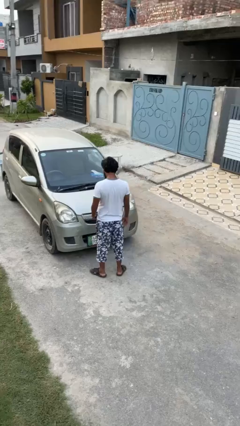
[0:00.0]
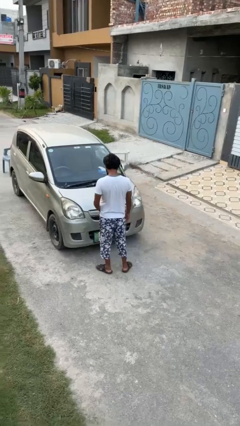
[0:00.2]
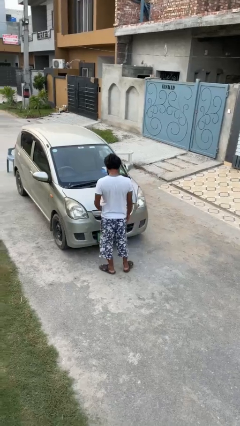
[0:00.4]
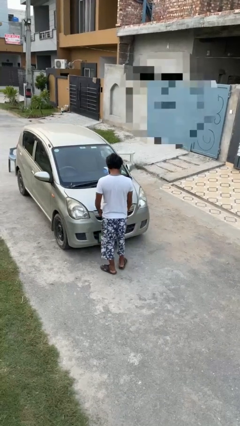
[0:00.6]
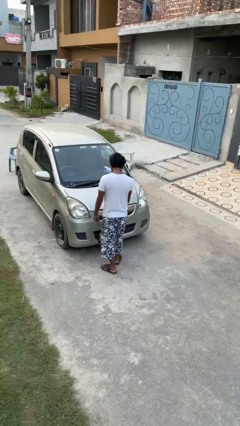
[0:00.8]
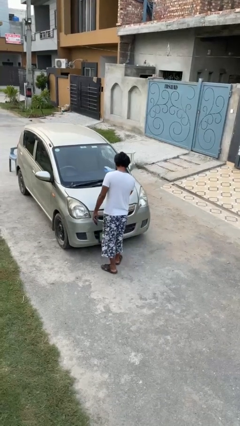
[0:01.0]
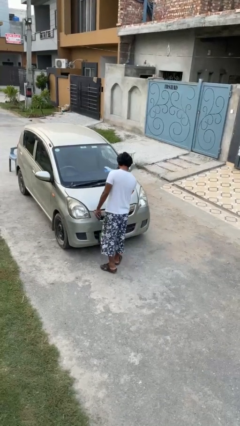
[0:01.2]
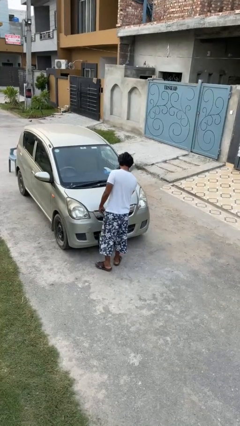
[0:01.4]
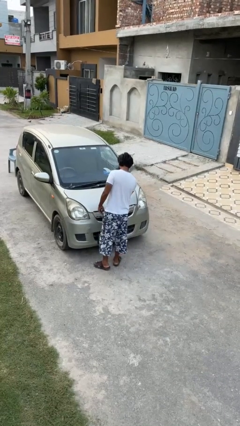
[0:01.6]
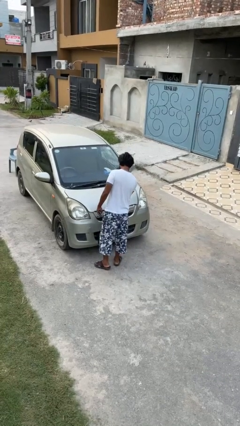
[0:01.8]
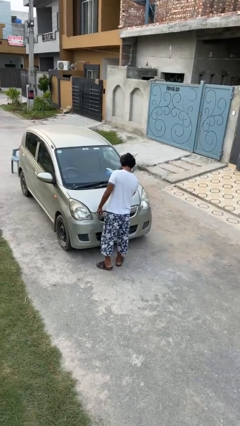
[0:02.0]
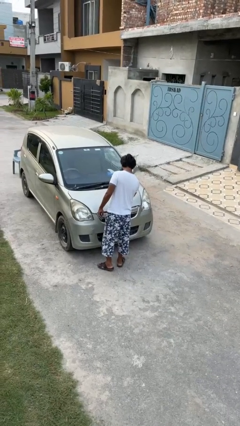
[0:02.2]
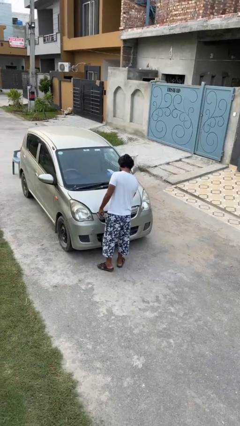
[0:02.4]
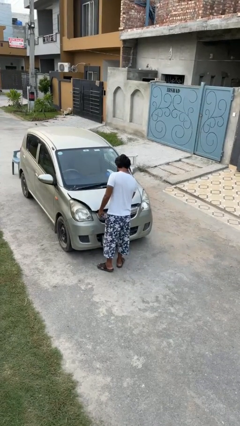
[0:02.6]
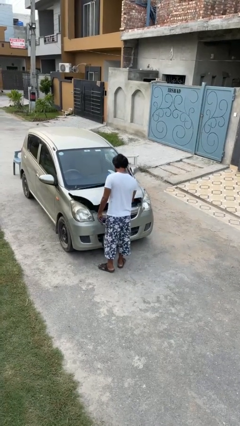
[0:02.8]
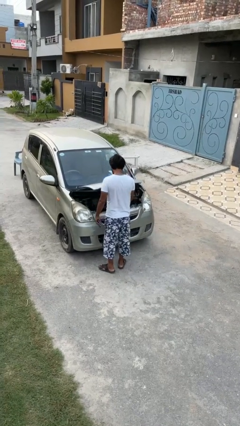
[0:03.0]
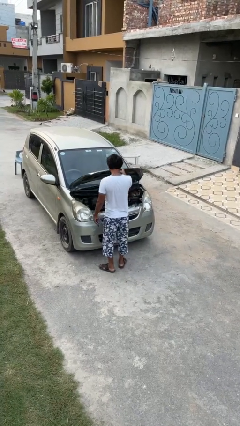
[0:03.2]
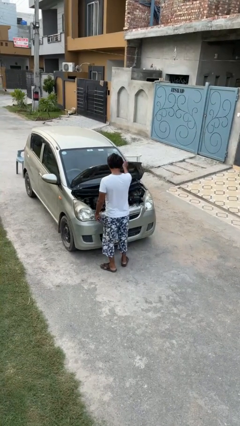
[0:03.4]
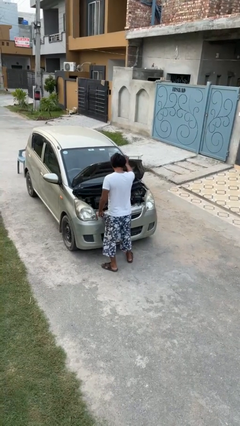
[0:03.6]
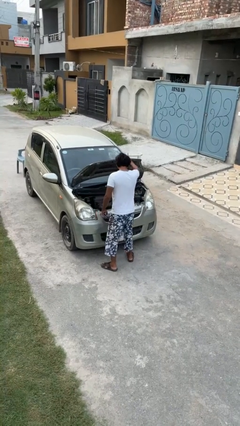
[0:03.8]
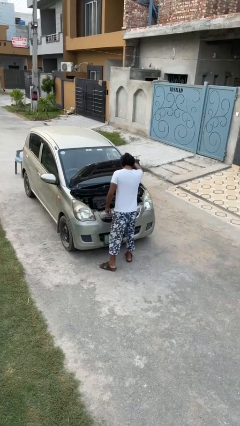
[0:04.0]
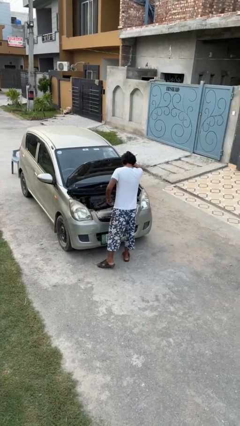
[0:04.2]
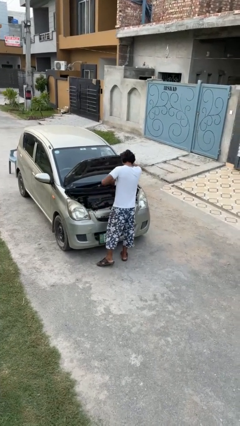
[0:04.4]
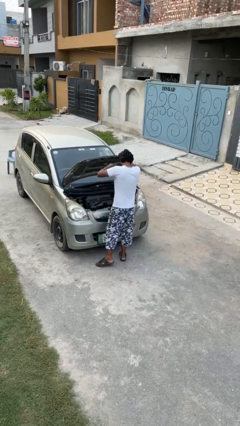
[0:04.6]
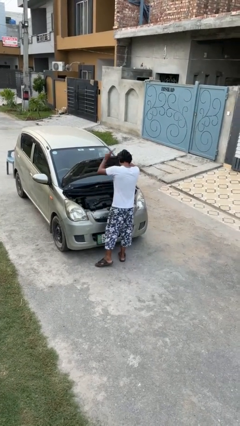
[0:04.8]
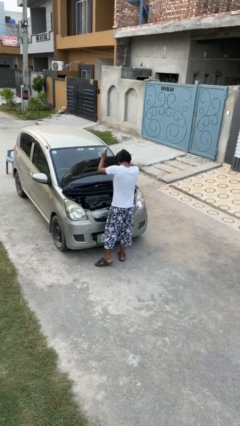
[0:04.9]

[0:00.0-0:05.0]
person opens car hood

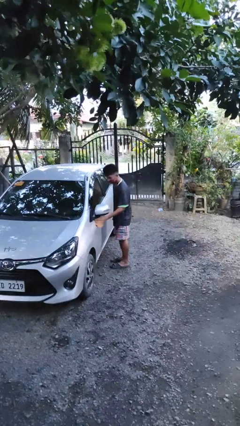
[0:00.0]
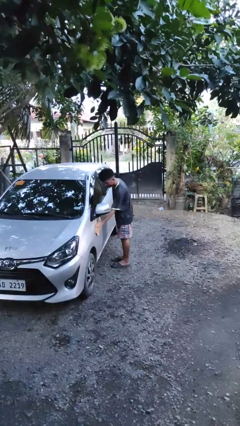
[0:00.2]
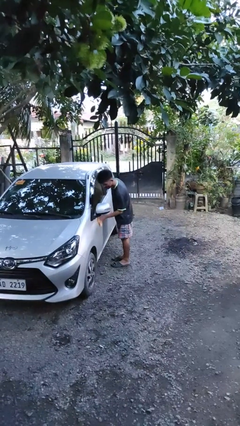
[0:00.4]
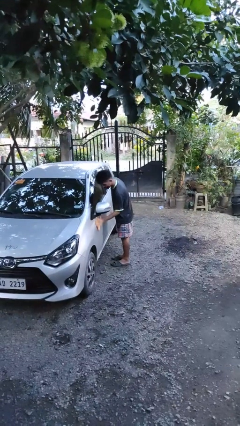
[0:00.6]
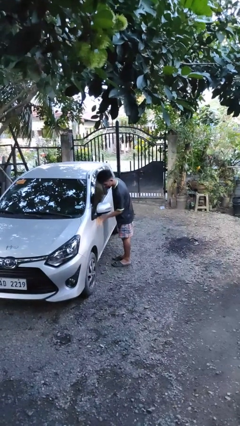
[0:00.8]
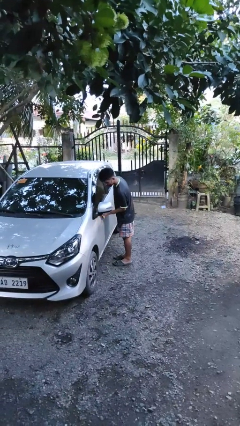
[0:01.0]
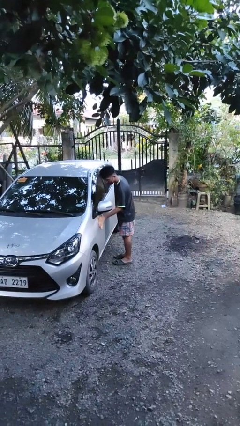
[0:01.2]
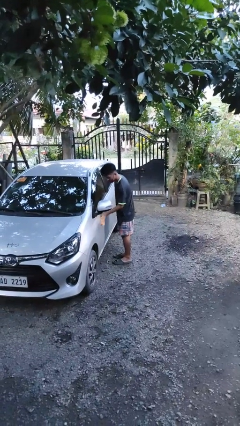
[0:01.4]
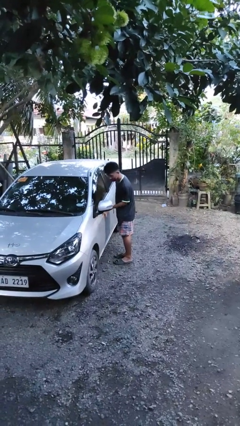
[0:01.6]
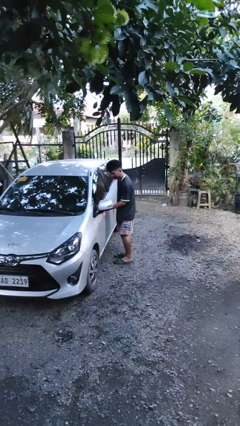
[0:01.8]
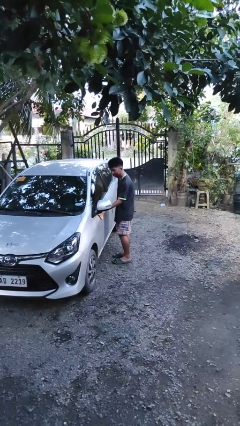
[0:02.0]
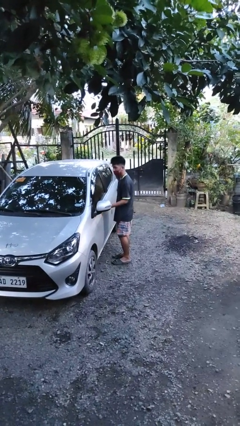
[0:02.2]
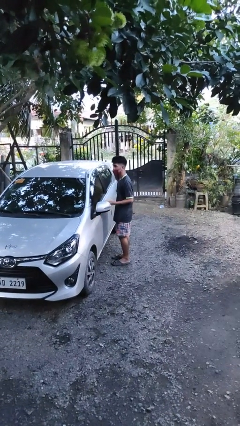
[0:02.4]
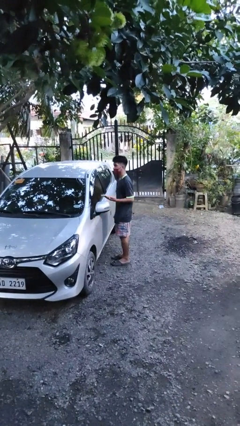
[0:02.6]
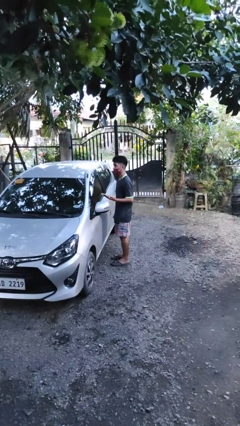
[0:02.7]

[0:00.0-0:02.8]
person polishes car with rag

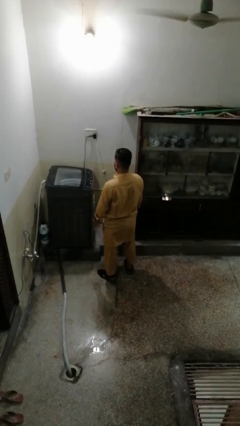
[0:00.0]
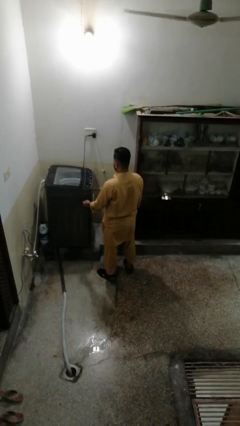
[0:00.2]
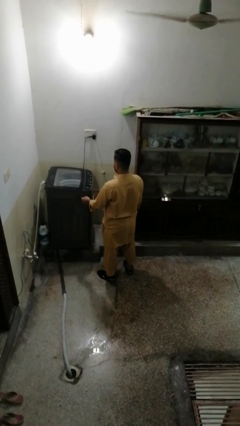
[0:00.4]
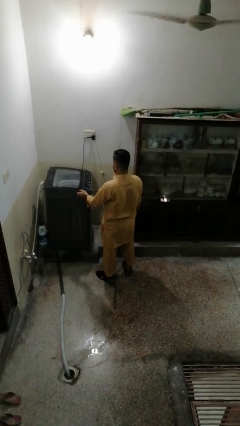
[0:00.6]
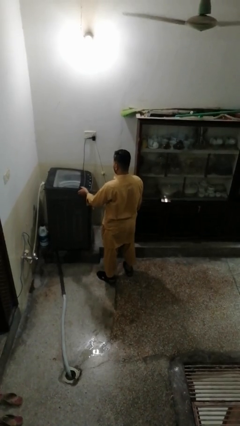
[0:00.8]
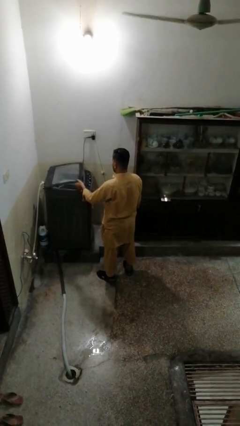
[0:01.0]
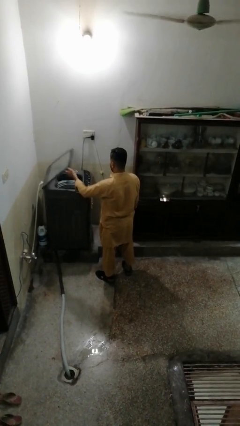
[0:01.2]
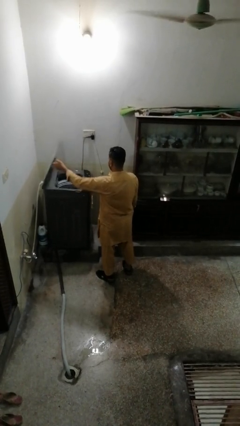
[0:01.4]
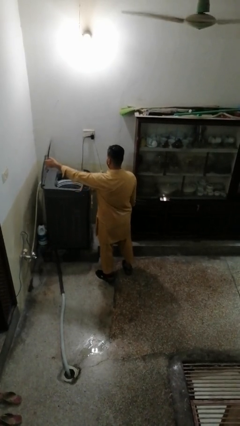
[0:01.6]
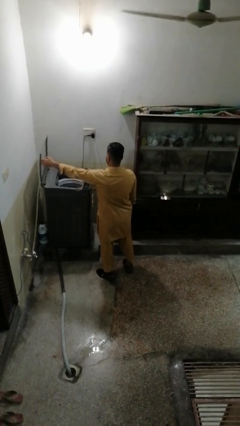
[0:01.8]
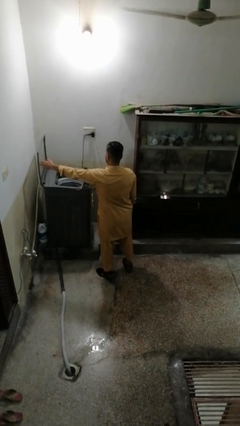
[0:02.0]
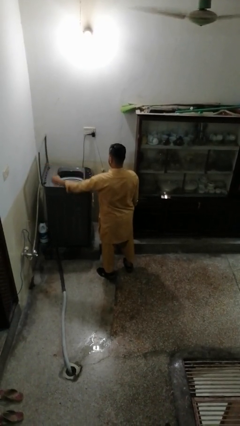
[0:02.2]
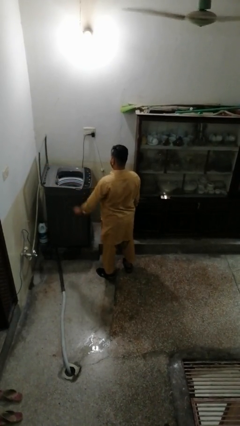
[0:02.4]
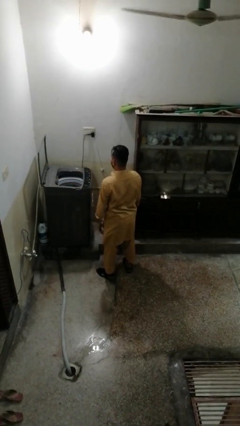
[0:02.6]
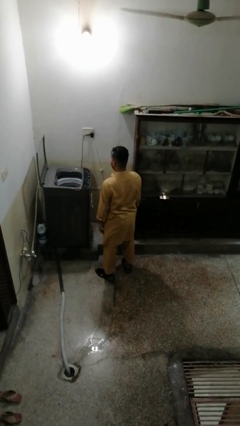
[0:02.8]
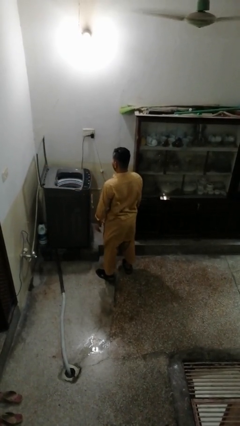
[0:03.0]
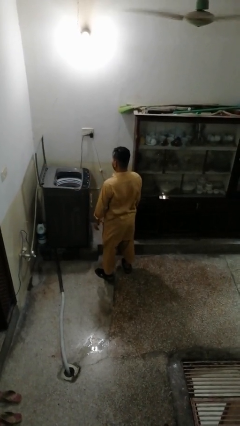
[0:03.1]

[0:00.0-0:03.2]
person opens clothes washer

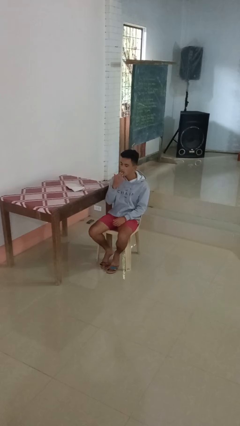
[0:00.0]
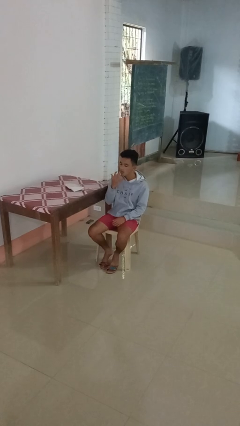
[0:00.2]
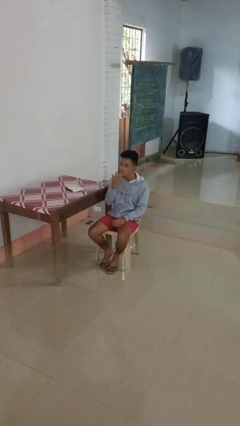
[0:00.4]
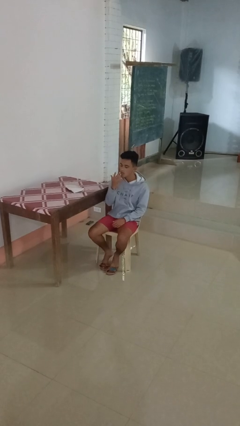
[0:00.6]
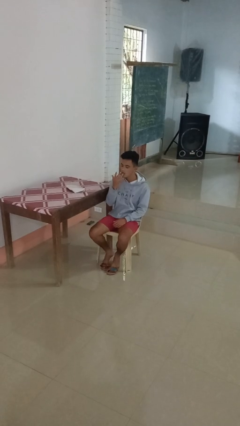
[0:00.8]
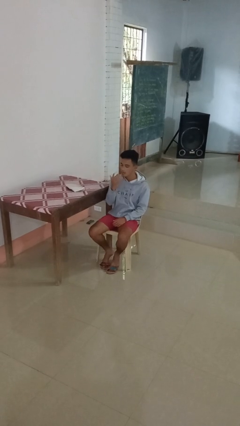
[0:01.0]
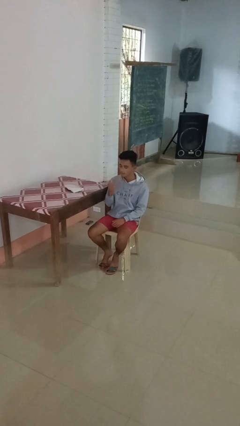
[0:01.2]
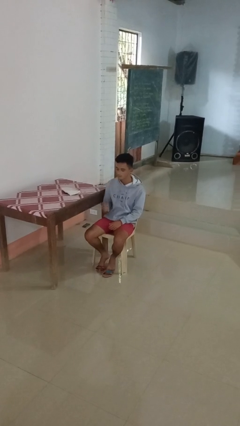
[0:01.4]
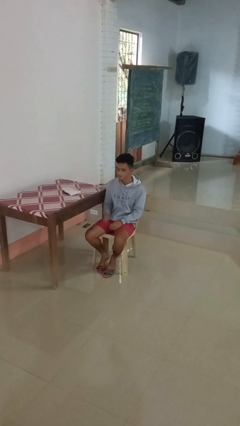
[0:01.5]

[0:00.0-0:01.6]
person licks fingers

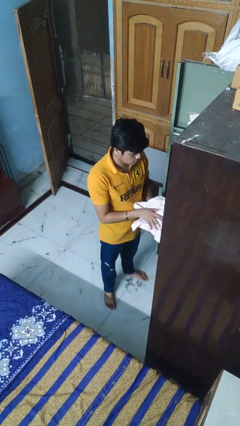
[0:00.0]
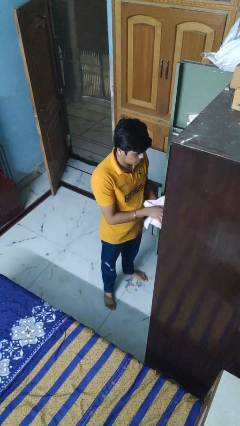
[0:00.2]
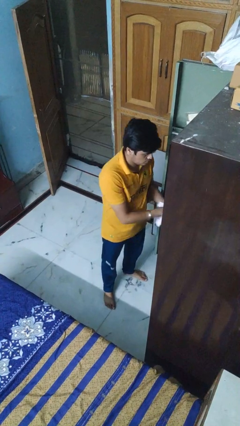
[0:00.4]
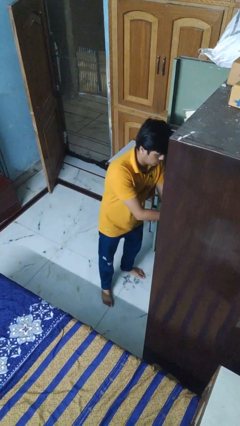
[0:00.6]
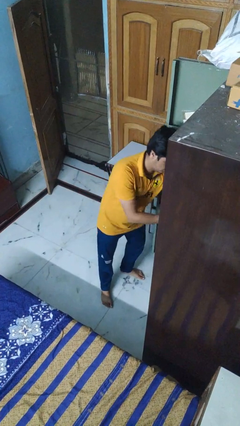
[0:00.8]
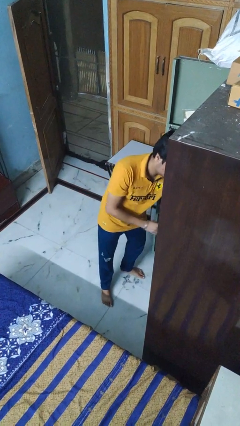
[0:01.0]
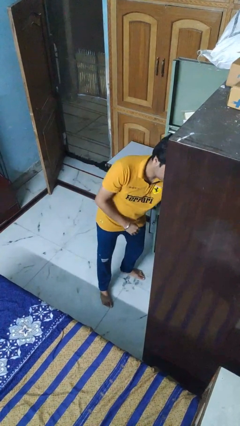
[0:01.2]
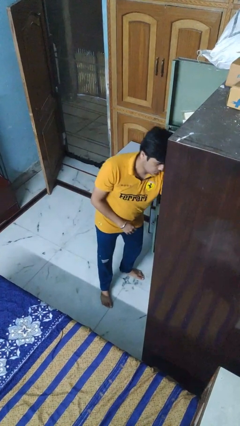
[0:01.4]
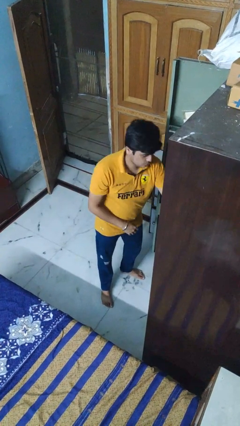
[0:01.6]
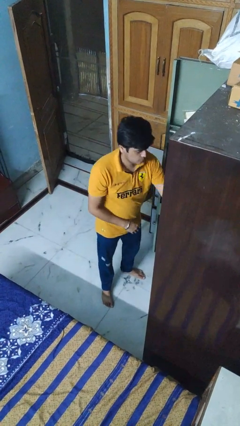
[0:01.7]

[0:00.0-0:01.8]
person puts clothes into dresser

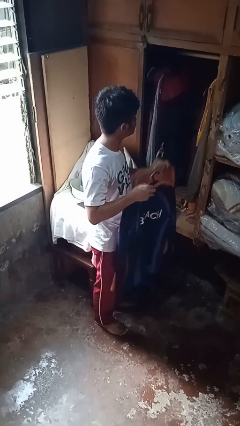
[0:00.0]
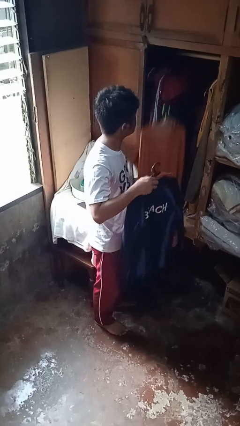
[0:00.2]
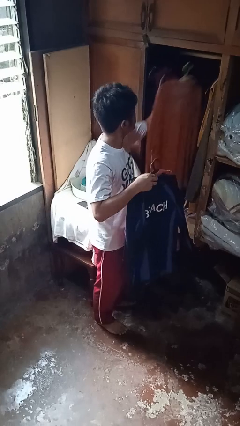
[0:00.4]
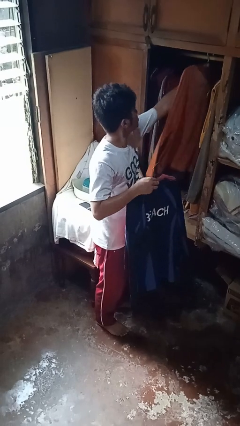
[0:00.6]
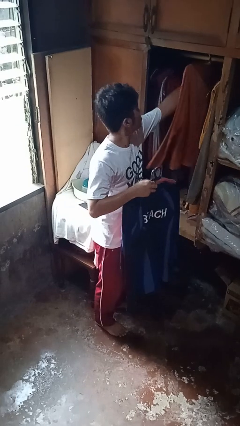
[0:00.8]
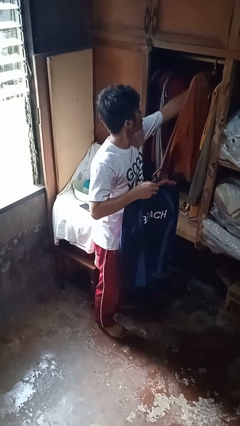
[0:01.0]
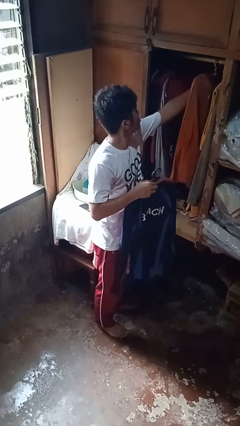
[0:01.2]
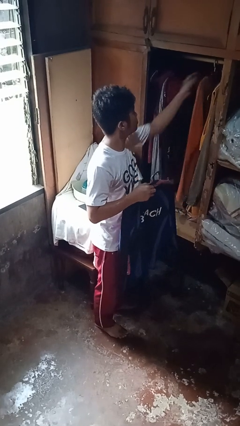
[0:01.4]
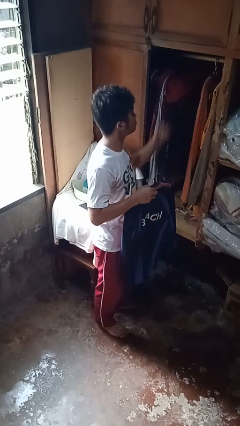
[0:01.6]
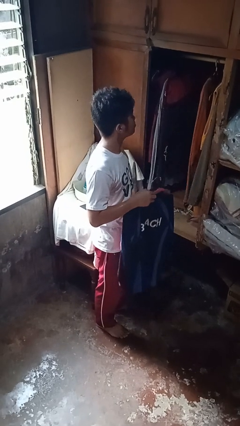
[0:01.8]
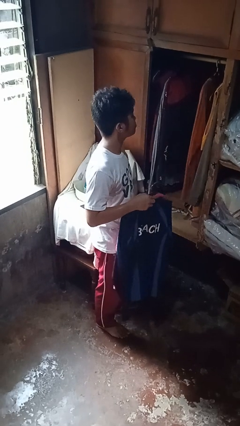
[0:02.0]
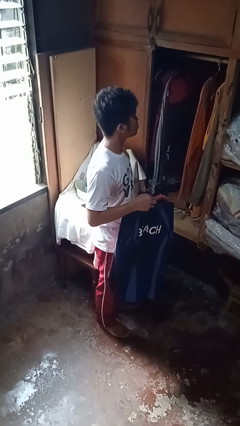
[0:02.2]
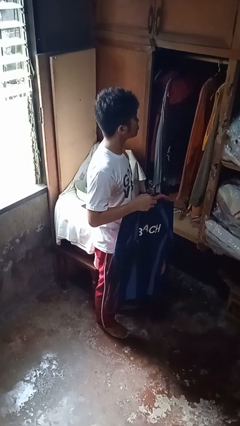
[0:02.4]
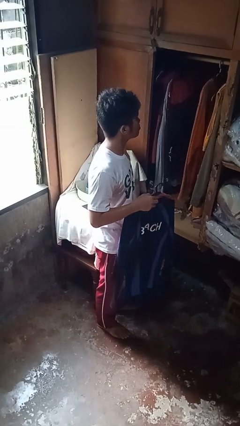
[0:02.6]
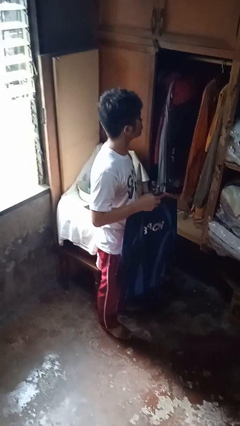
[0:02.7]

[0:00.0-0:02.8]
person puts clothes into closet

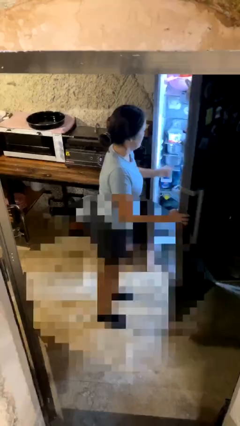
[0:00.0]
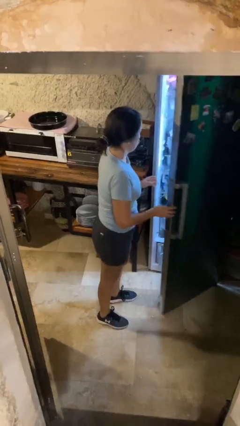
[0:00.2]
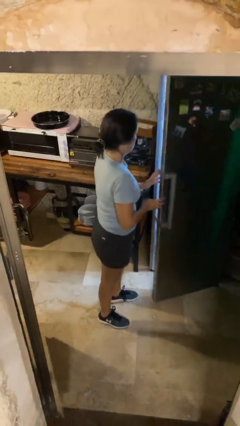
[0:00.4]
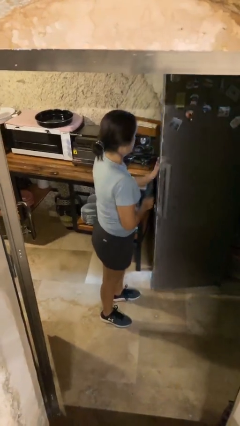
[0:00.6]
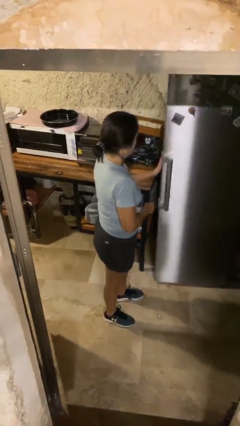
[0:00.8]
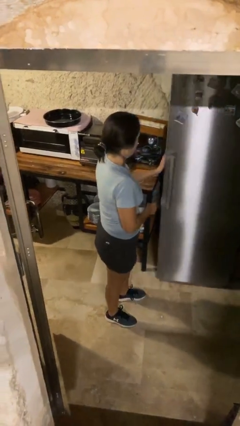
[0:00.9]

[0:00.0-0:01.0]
person closes refrigerator
